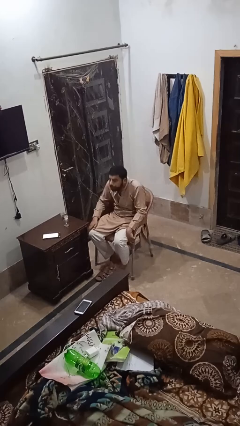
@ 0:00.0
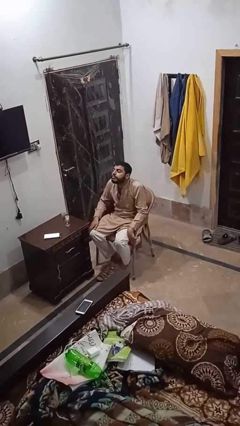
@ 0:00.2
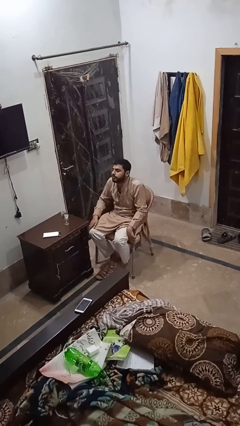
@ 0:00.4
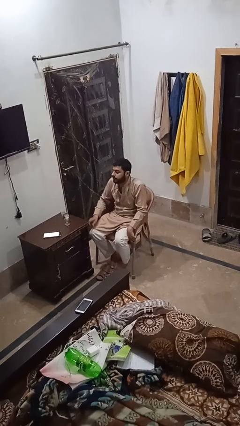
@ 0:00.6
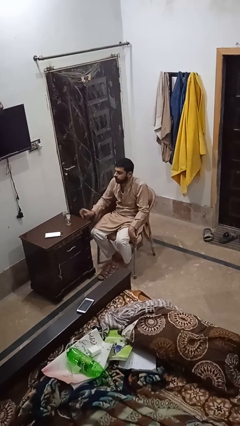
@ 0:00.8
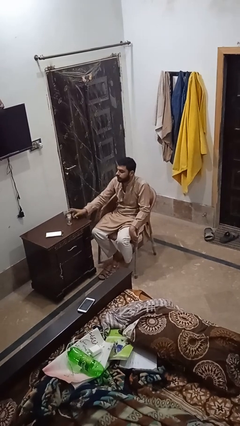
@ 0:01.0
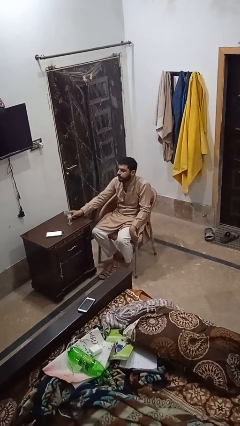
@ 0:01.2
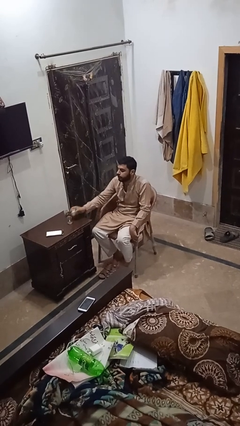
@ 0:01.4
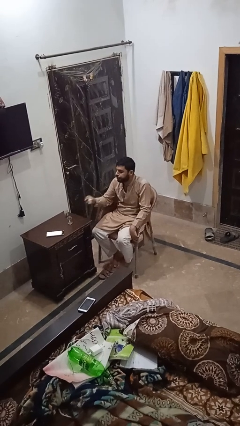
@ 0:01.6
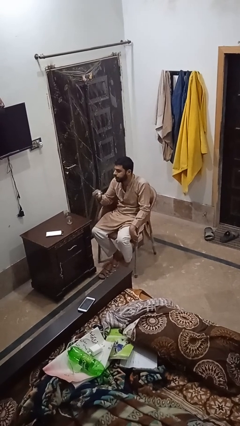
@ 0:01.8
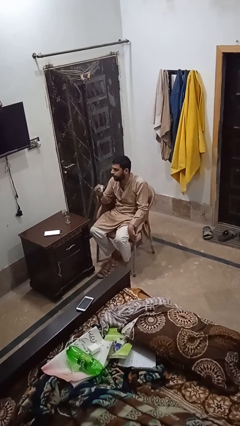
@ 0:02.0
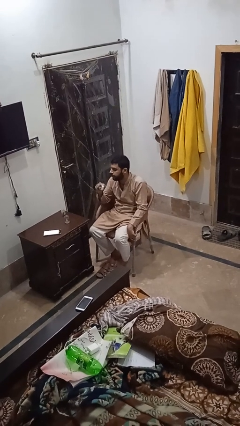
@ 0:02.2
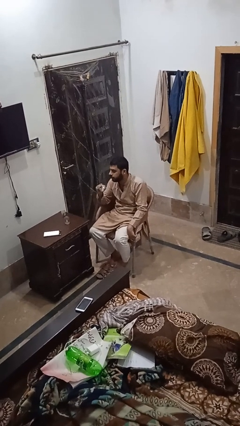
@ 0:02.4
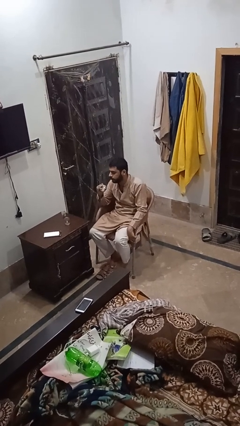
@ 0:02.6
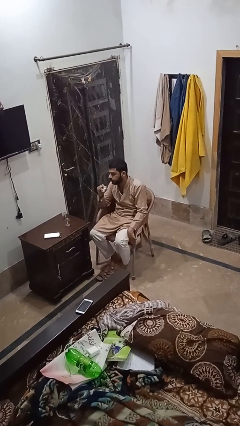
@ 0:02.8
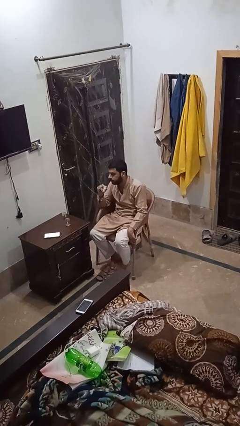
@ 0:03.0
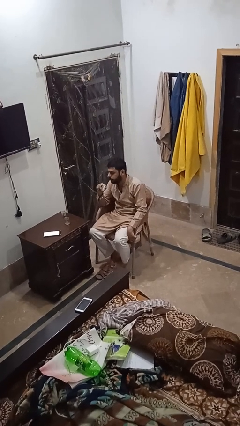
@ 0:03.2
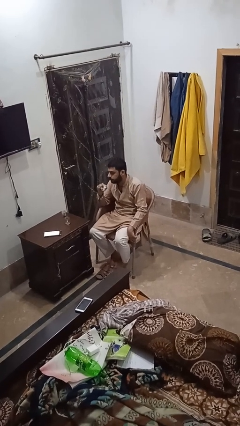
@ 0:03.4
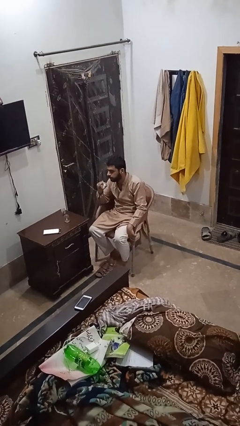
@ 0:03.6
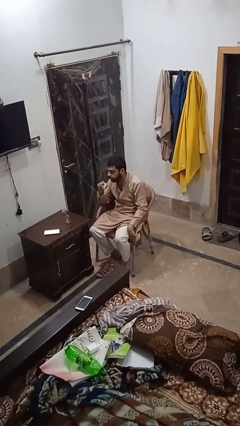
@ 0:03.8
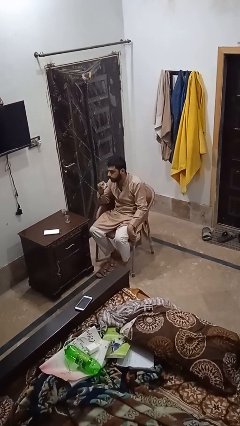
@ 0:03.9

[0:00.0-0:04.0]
person picks up object from table

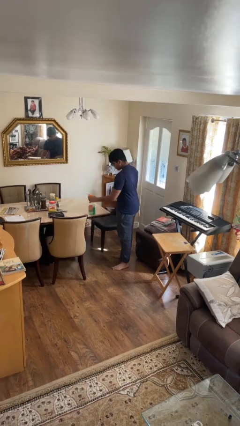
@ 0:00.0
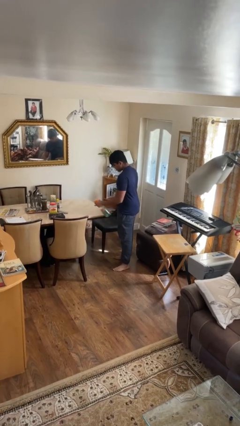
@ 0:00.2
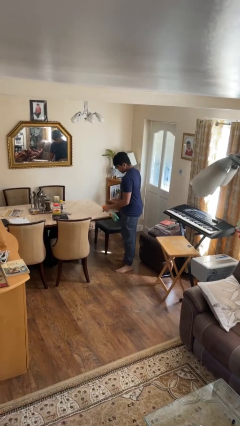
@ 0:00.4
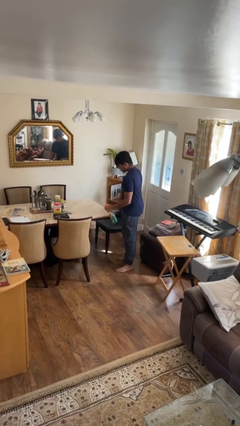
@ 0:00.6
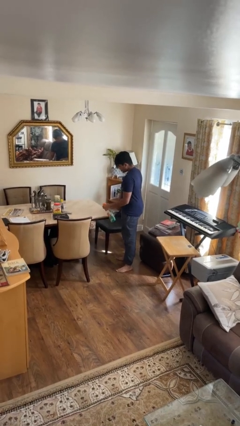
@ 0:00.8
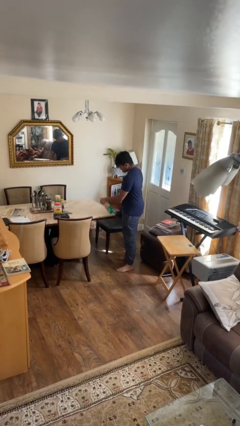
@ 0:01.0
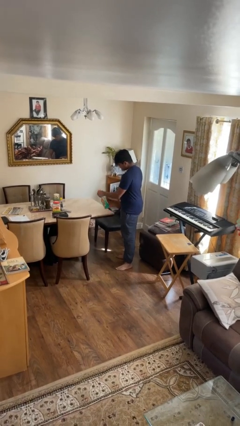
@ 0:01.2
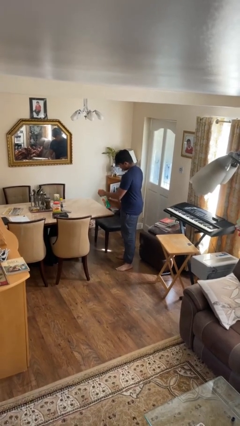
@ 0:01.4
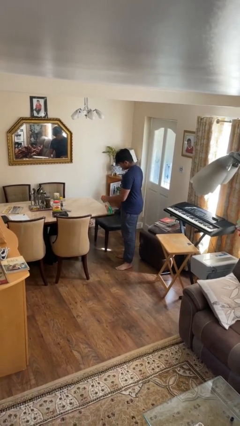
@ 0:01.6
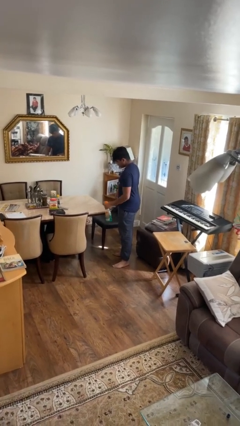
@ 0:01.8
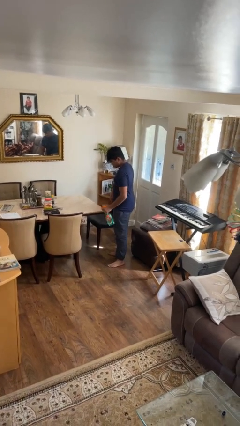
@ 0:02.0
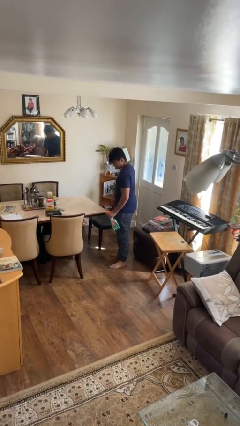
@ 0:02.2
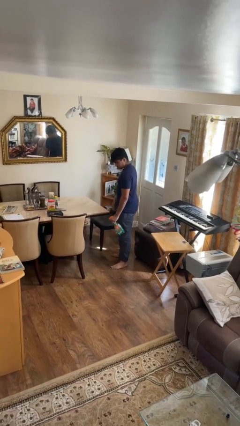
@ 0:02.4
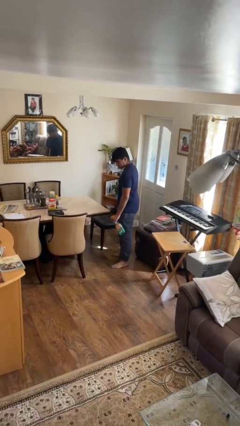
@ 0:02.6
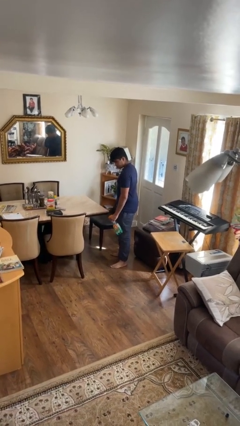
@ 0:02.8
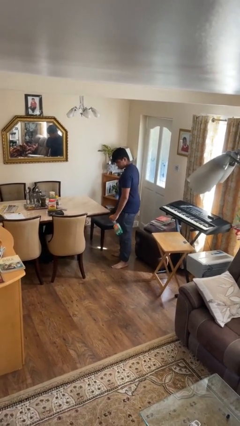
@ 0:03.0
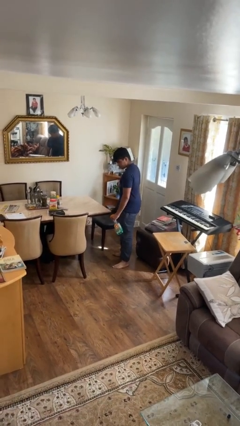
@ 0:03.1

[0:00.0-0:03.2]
person sprays from bottle

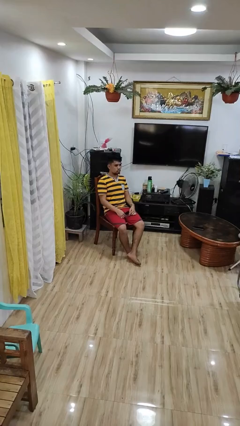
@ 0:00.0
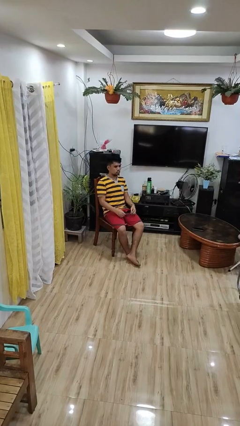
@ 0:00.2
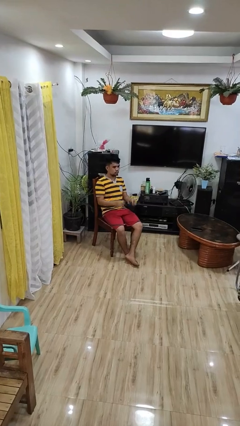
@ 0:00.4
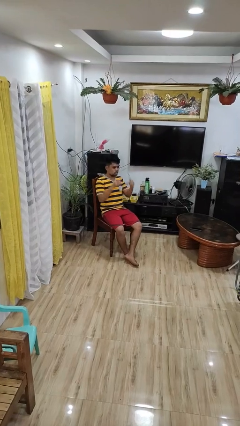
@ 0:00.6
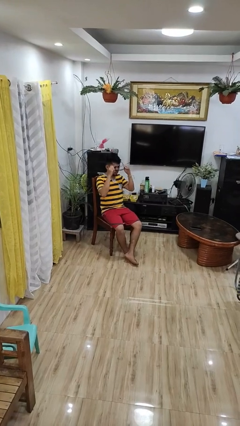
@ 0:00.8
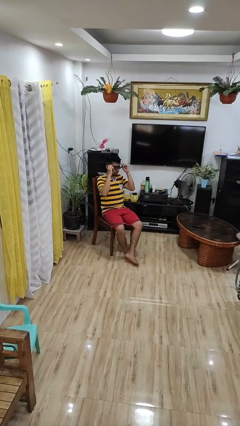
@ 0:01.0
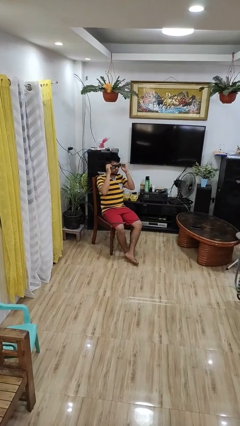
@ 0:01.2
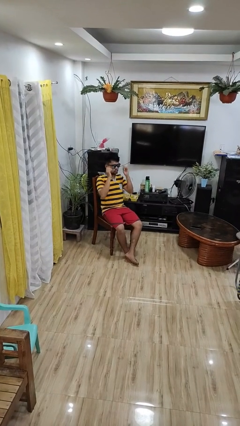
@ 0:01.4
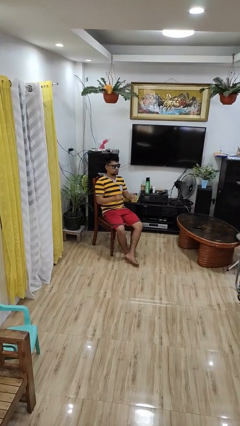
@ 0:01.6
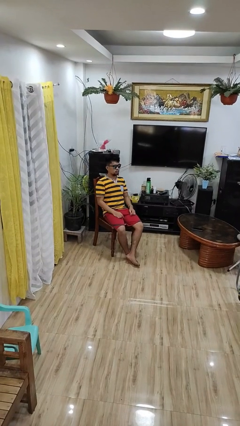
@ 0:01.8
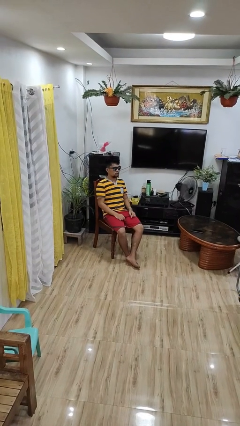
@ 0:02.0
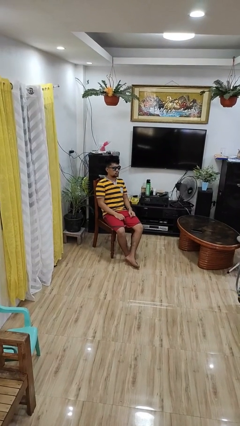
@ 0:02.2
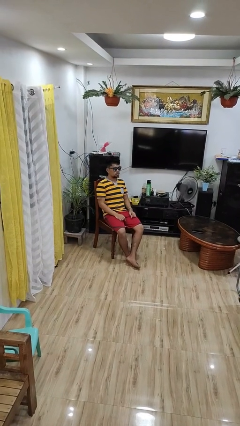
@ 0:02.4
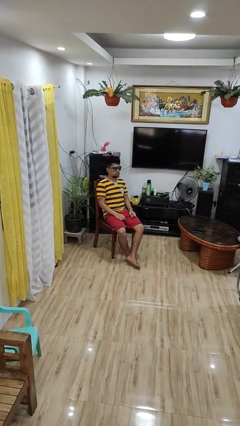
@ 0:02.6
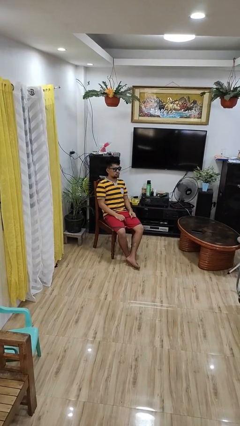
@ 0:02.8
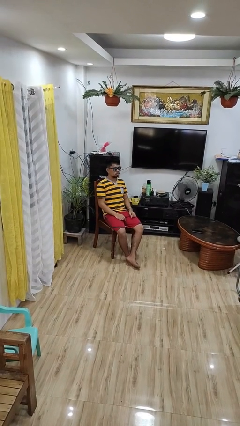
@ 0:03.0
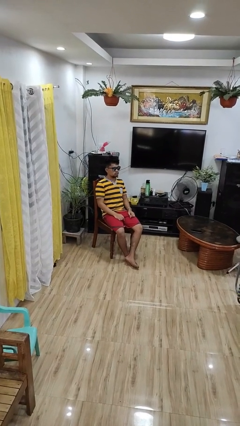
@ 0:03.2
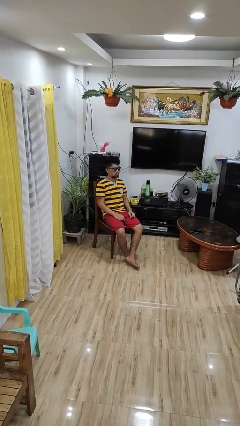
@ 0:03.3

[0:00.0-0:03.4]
person puts on sunglasses

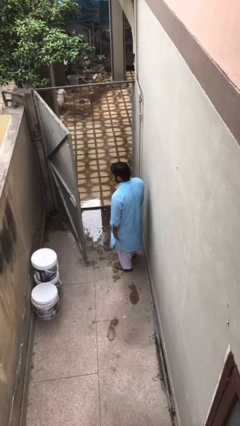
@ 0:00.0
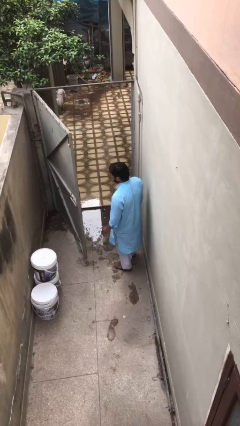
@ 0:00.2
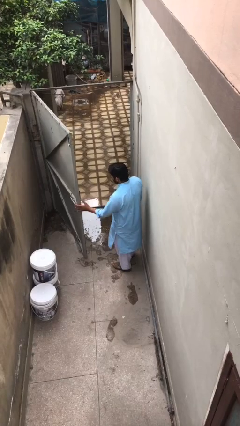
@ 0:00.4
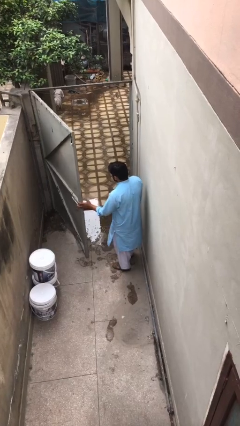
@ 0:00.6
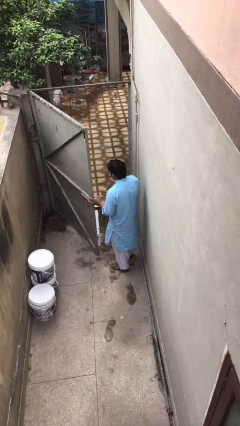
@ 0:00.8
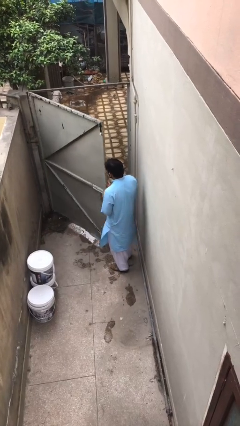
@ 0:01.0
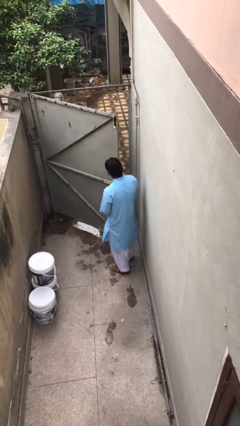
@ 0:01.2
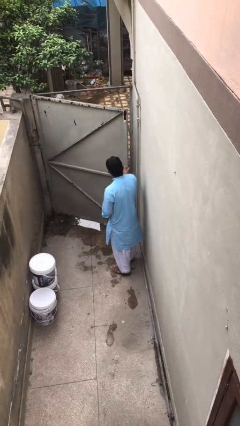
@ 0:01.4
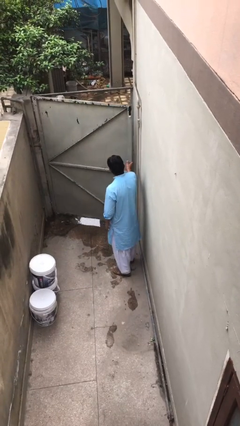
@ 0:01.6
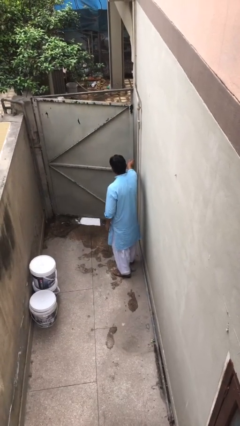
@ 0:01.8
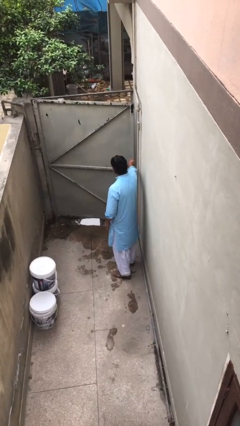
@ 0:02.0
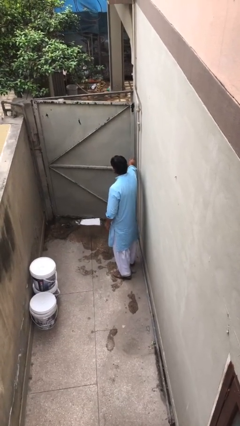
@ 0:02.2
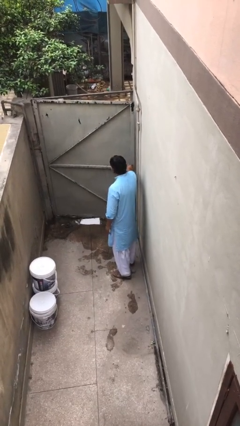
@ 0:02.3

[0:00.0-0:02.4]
person closes facility door

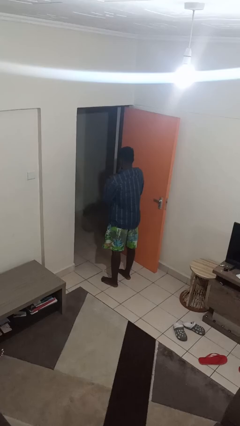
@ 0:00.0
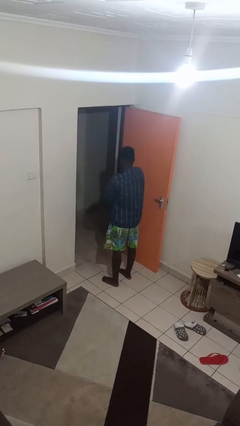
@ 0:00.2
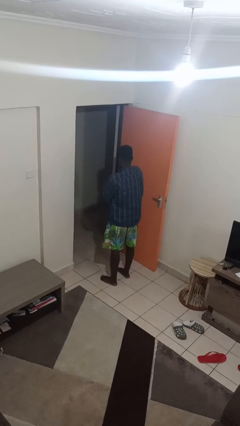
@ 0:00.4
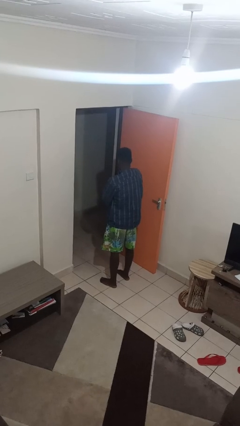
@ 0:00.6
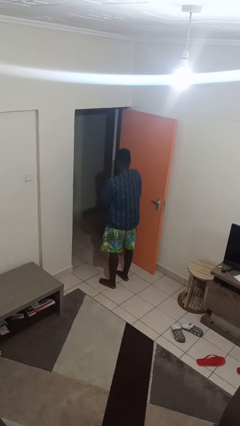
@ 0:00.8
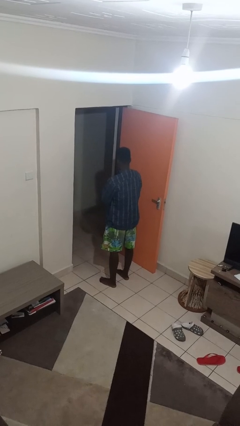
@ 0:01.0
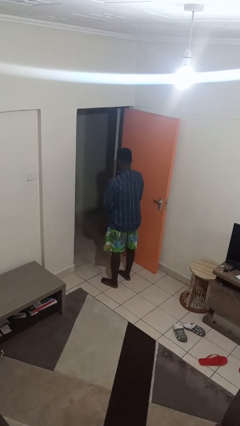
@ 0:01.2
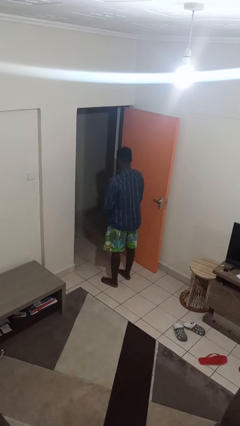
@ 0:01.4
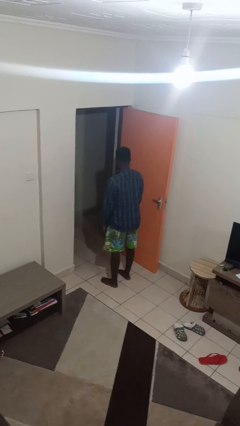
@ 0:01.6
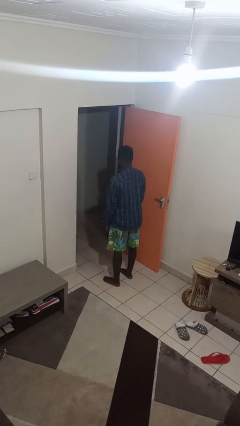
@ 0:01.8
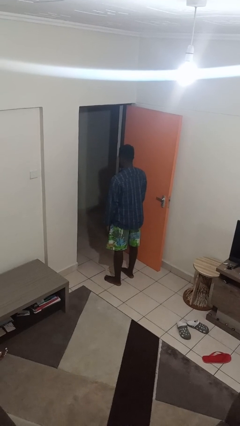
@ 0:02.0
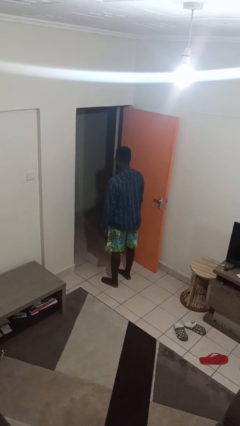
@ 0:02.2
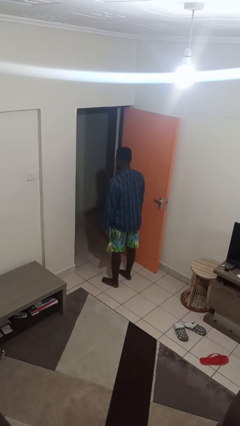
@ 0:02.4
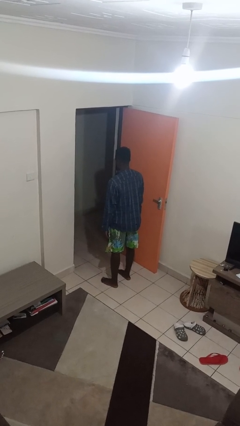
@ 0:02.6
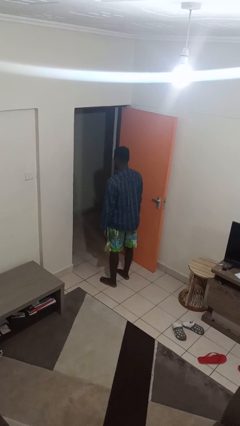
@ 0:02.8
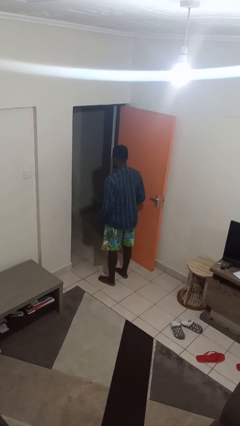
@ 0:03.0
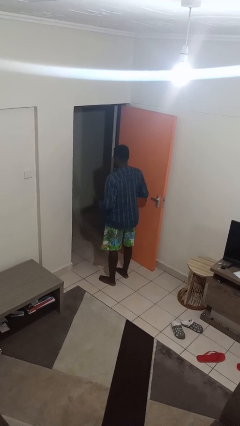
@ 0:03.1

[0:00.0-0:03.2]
person unzips jacket

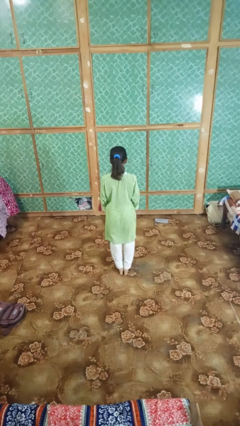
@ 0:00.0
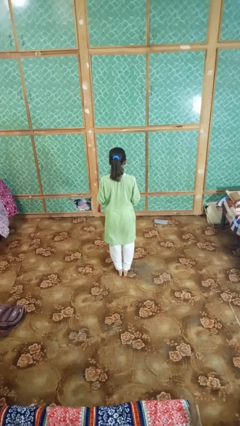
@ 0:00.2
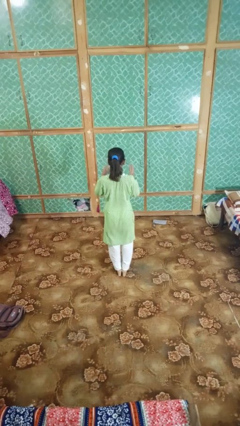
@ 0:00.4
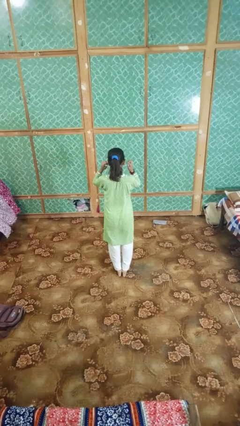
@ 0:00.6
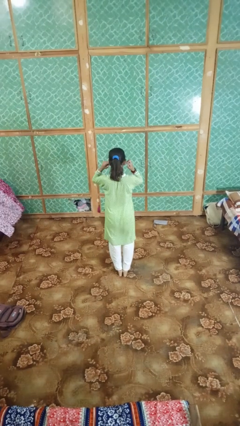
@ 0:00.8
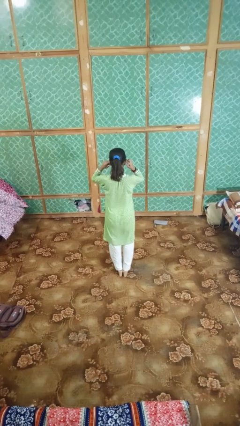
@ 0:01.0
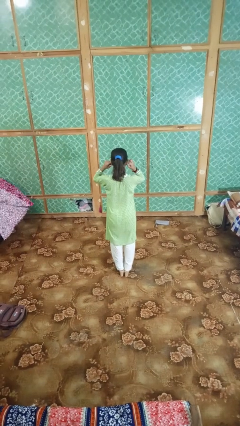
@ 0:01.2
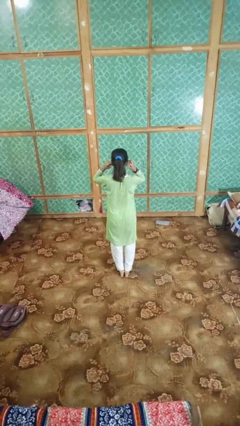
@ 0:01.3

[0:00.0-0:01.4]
person puts fingers in ear
